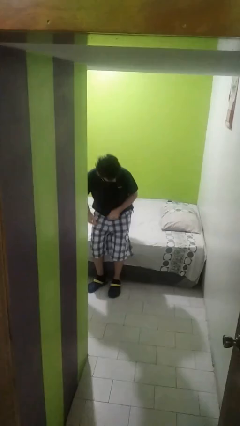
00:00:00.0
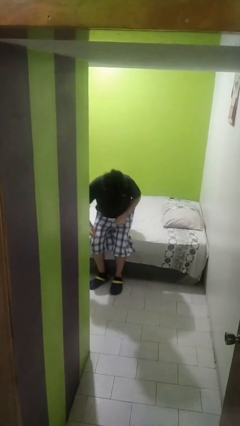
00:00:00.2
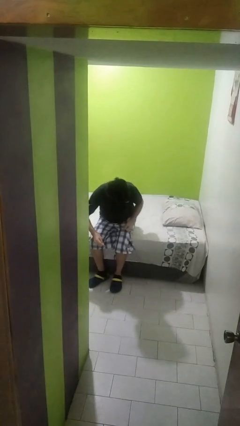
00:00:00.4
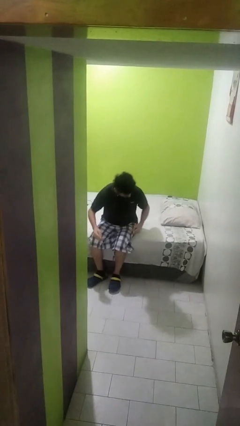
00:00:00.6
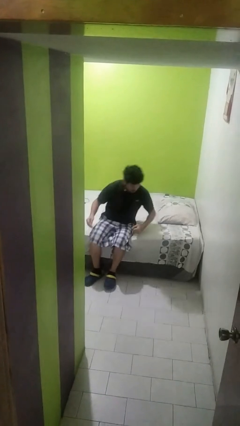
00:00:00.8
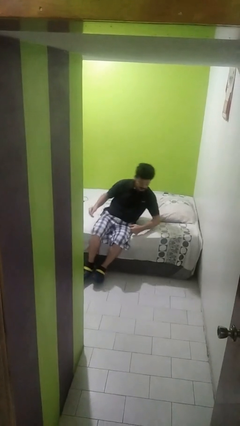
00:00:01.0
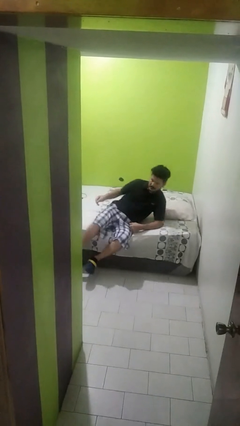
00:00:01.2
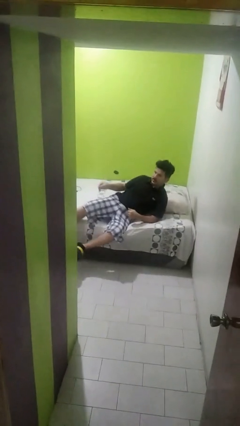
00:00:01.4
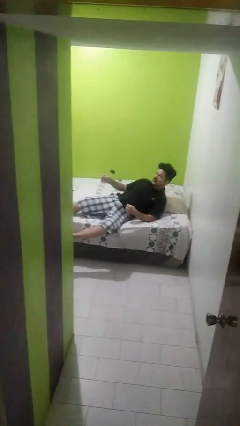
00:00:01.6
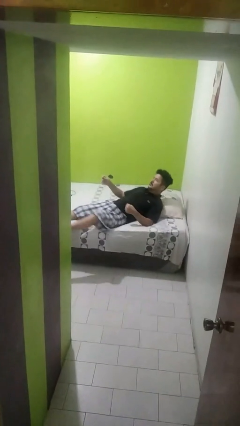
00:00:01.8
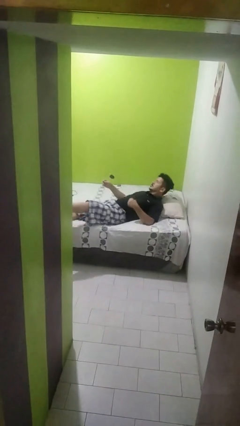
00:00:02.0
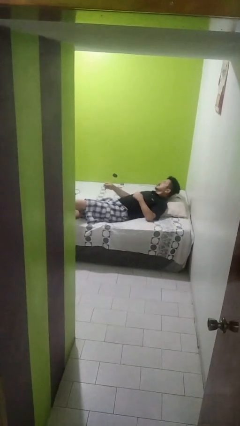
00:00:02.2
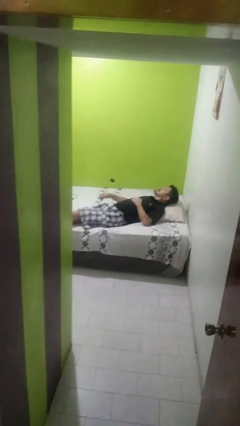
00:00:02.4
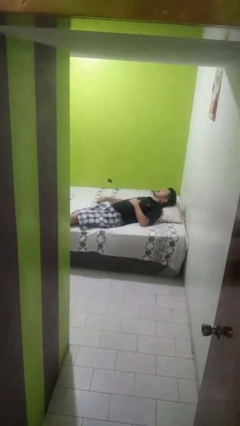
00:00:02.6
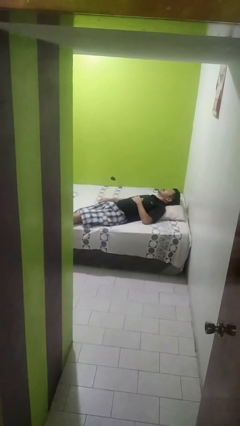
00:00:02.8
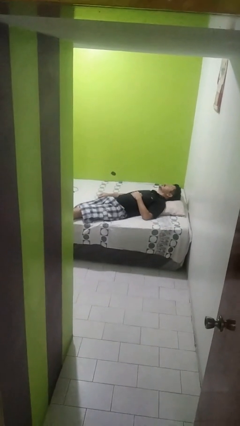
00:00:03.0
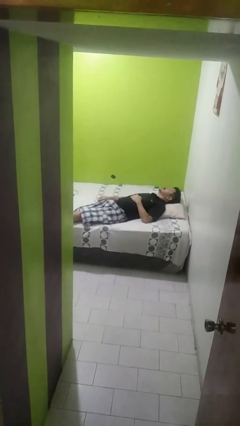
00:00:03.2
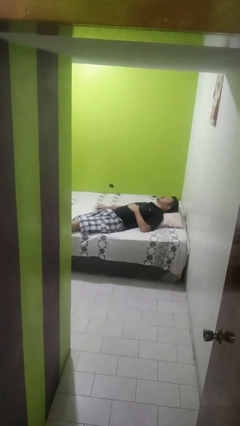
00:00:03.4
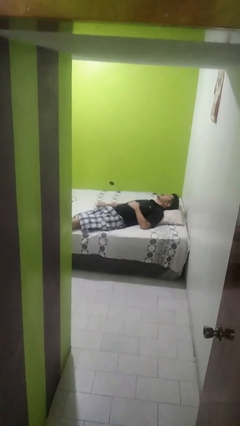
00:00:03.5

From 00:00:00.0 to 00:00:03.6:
person lies down on bed

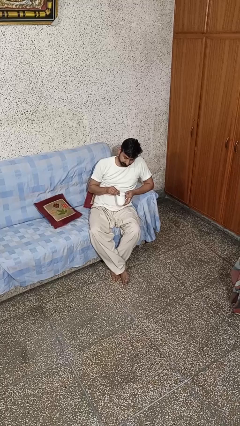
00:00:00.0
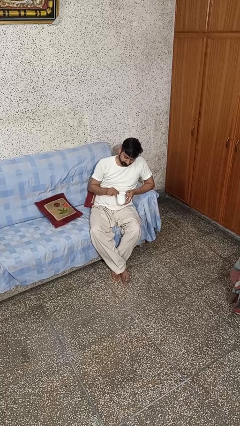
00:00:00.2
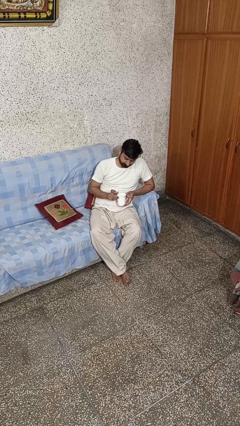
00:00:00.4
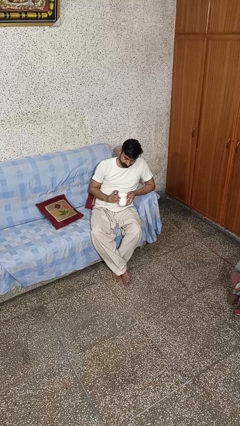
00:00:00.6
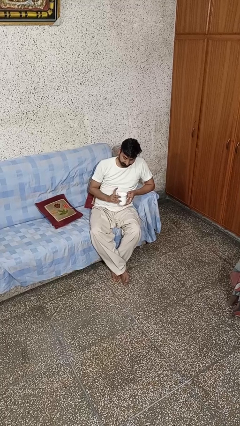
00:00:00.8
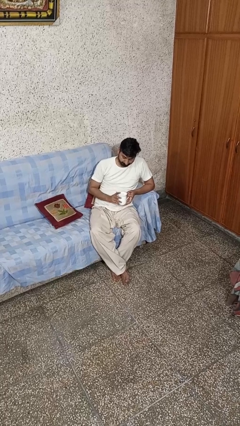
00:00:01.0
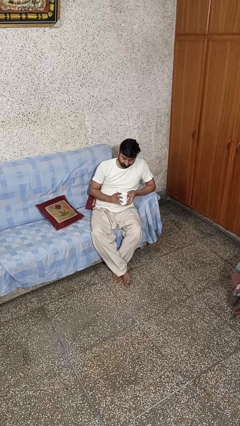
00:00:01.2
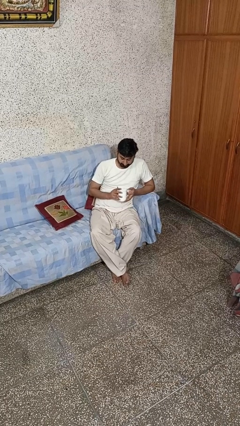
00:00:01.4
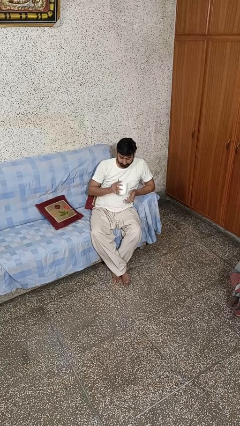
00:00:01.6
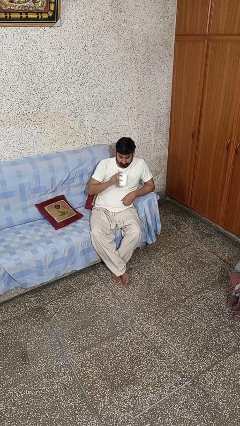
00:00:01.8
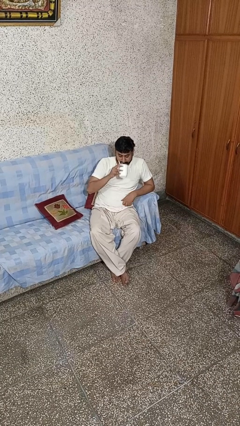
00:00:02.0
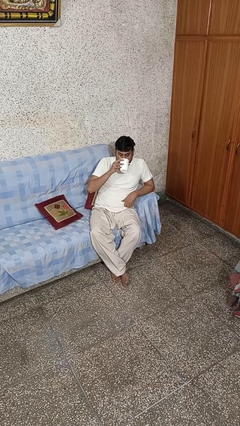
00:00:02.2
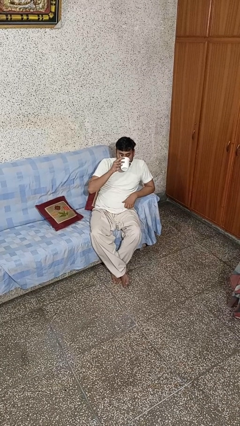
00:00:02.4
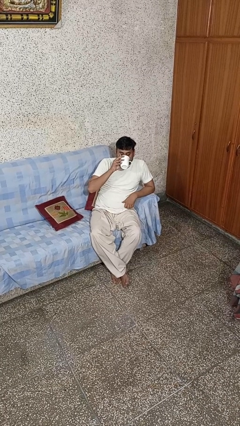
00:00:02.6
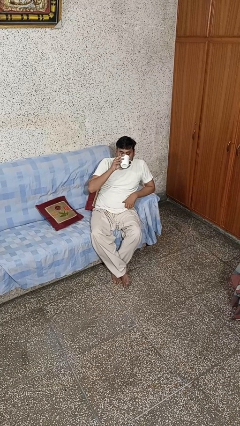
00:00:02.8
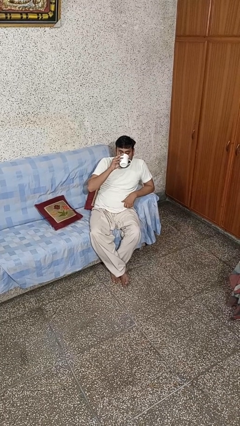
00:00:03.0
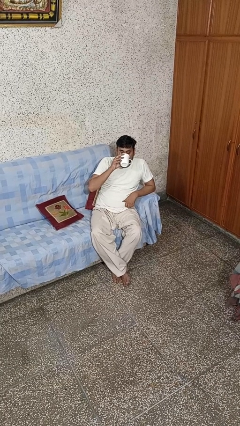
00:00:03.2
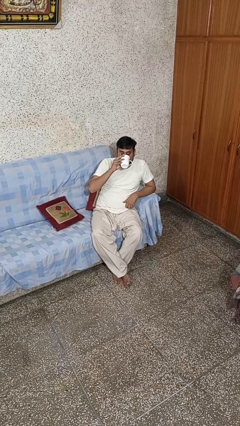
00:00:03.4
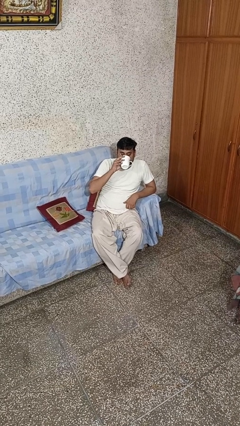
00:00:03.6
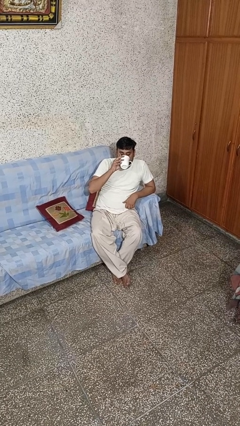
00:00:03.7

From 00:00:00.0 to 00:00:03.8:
person drinks from mug

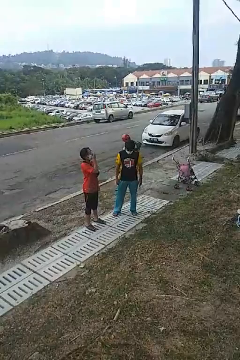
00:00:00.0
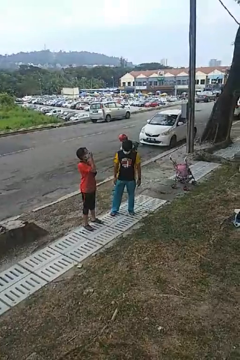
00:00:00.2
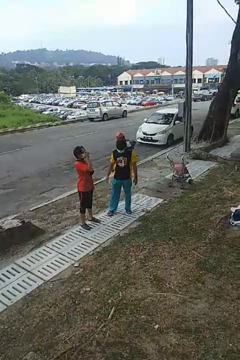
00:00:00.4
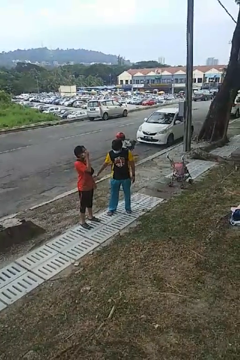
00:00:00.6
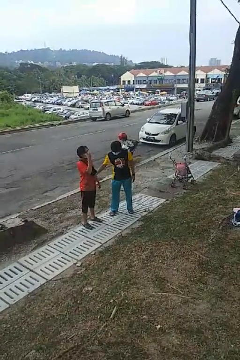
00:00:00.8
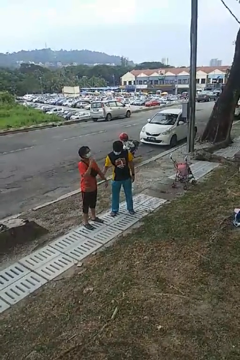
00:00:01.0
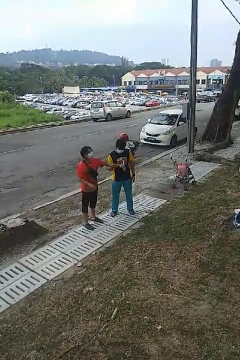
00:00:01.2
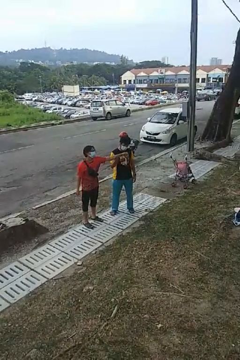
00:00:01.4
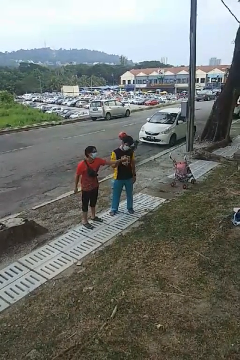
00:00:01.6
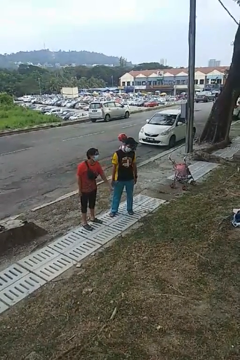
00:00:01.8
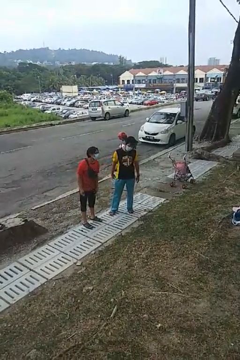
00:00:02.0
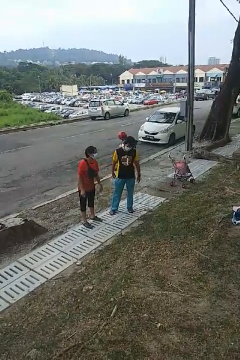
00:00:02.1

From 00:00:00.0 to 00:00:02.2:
person grabs person by forearm

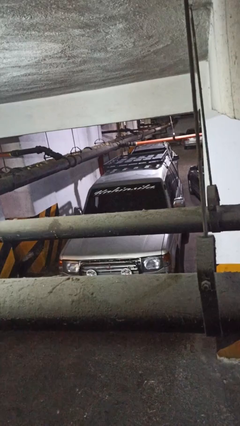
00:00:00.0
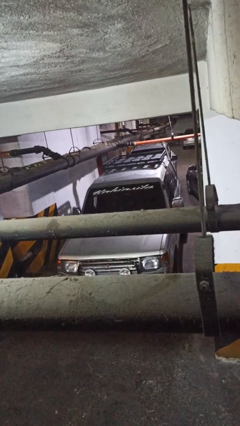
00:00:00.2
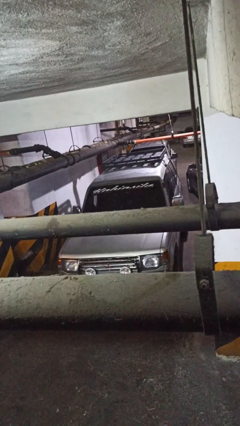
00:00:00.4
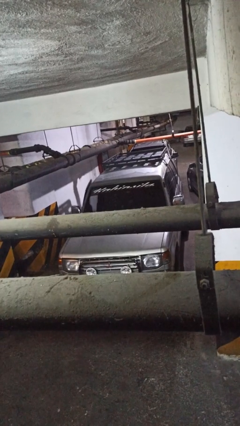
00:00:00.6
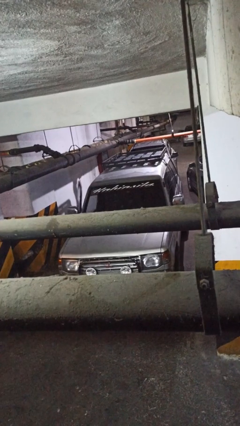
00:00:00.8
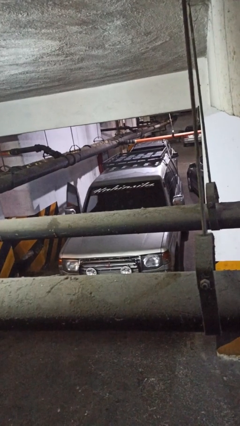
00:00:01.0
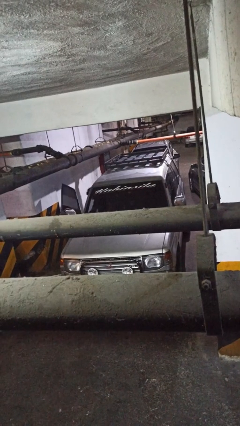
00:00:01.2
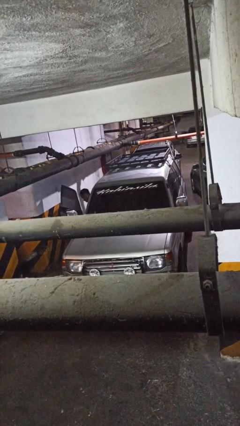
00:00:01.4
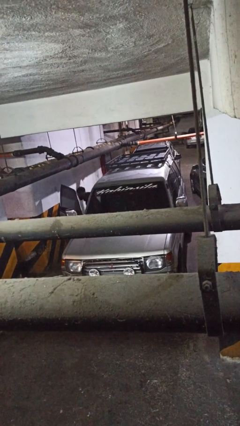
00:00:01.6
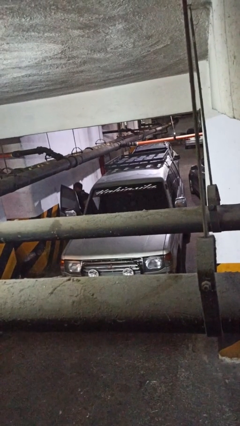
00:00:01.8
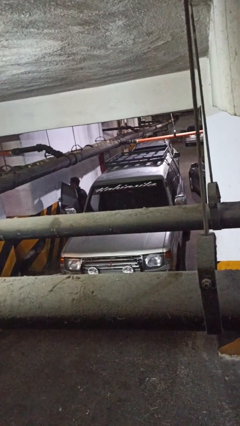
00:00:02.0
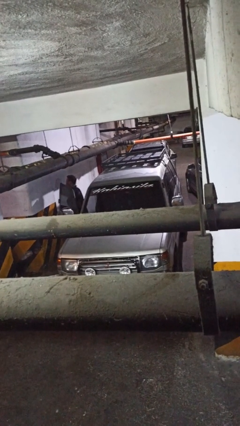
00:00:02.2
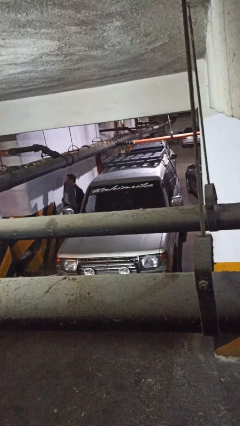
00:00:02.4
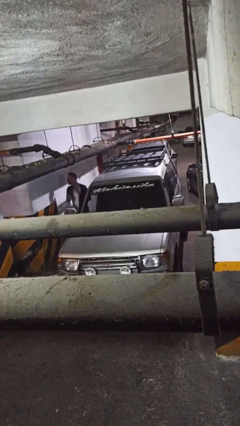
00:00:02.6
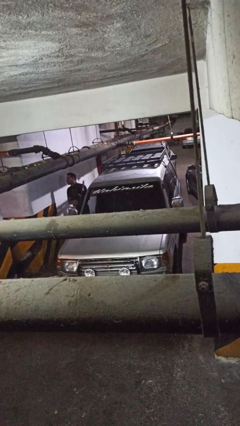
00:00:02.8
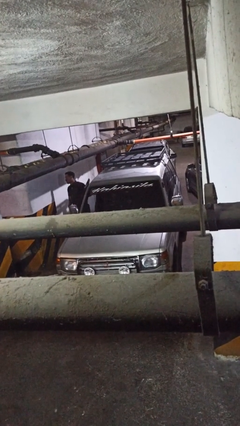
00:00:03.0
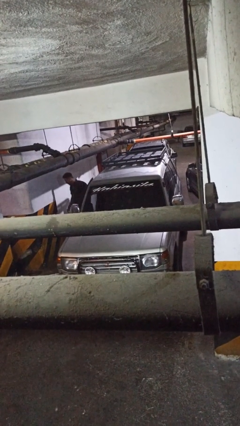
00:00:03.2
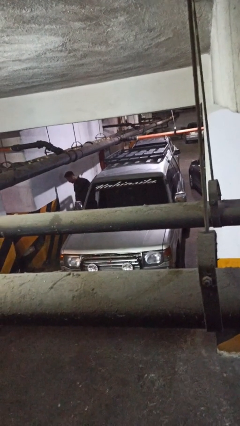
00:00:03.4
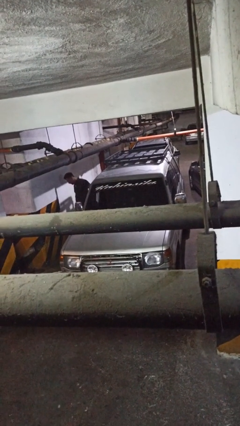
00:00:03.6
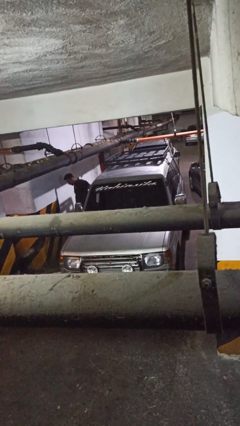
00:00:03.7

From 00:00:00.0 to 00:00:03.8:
car drops off person

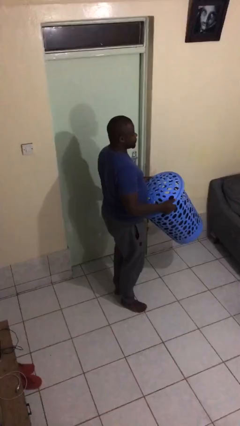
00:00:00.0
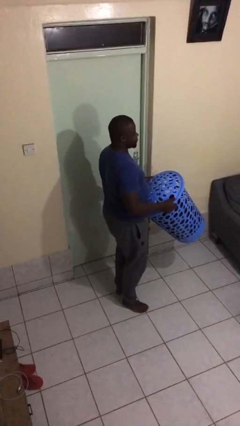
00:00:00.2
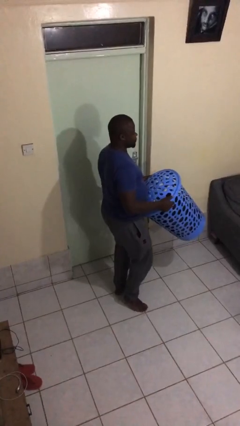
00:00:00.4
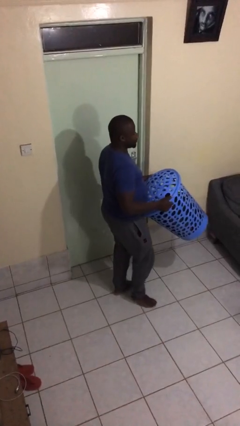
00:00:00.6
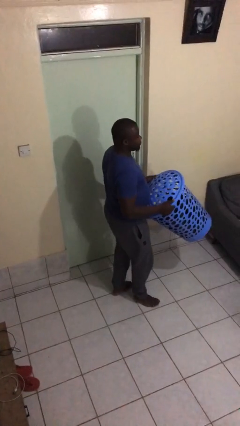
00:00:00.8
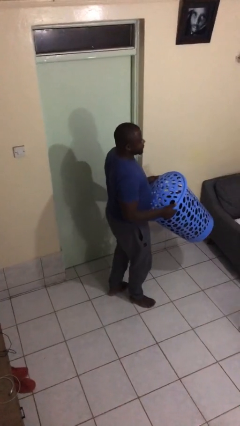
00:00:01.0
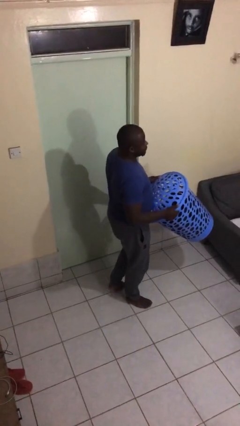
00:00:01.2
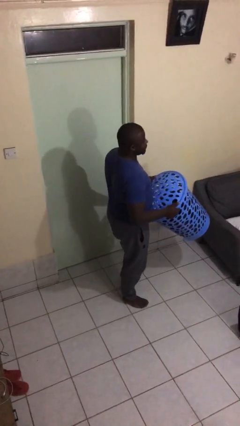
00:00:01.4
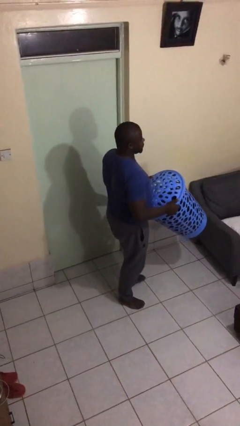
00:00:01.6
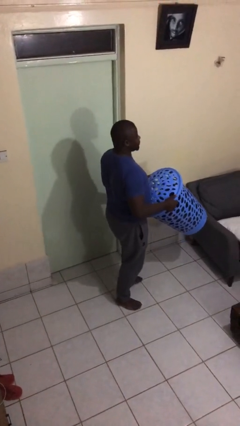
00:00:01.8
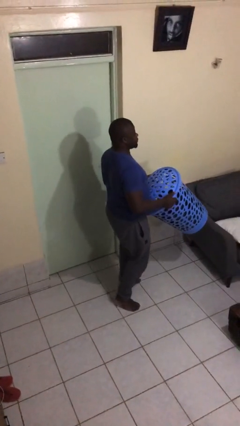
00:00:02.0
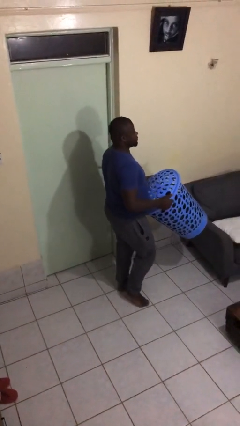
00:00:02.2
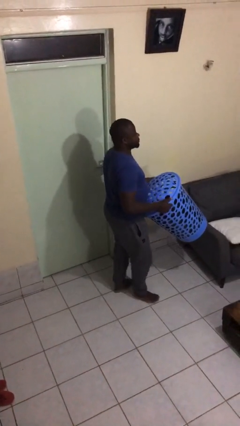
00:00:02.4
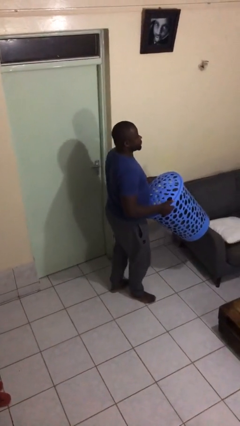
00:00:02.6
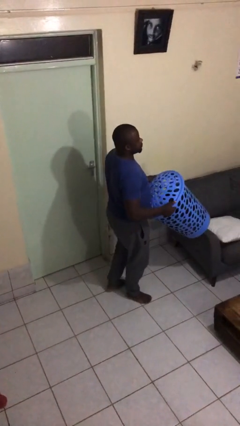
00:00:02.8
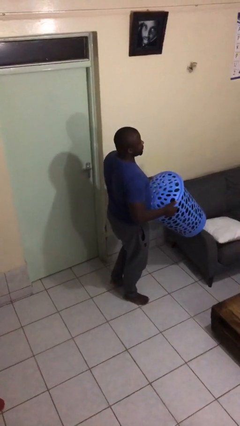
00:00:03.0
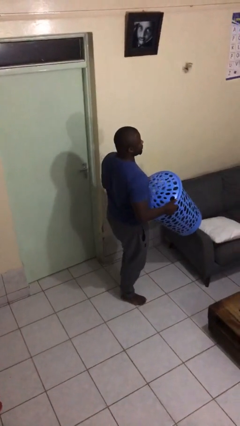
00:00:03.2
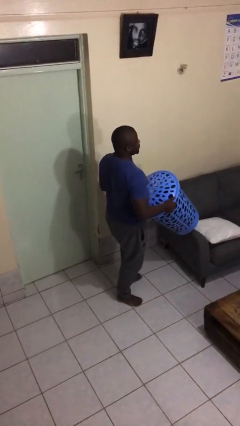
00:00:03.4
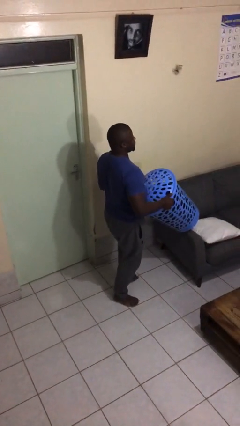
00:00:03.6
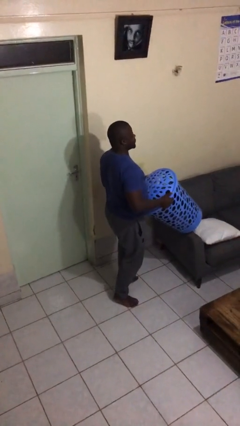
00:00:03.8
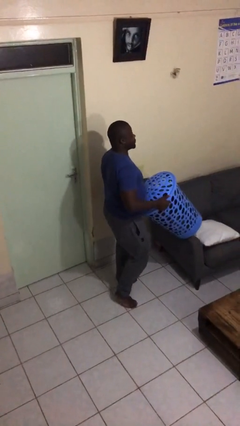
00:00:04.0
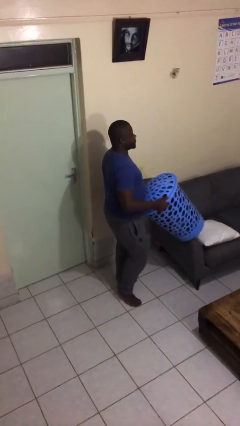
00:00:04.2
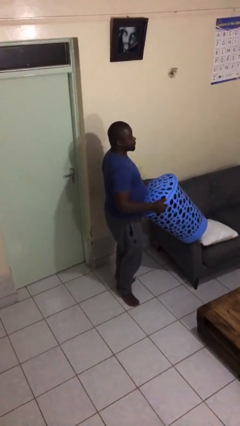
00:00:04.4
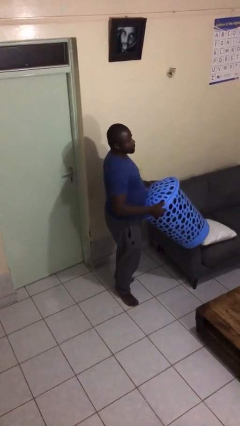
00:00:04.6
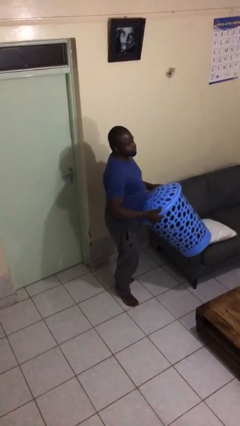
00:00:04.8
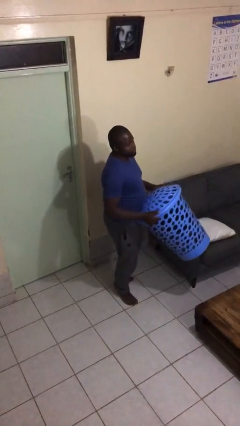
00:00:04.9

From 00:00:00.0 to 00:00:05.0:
person carries laundry basket
